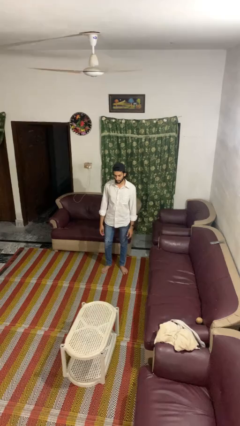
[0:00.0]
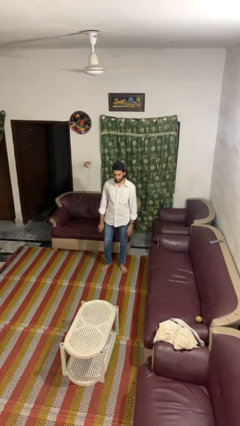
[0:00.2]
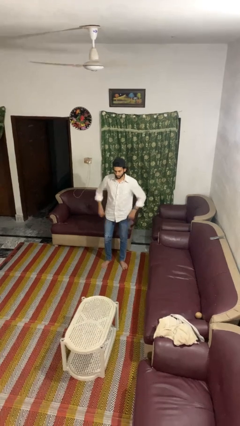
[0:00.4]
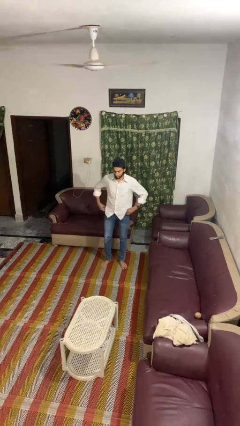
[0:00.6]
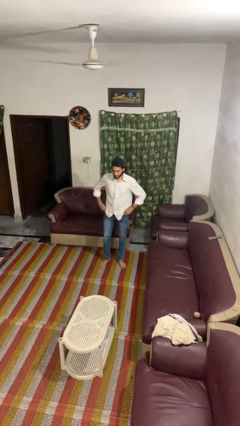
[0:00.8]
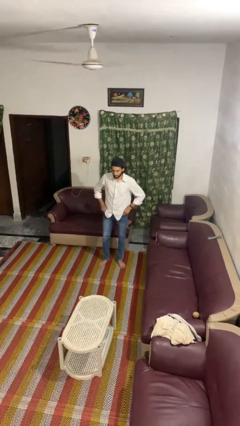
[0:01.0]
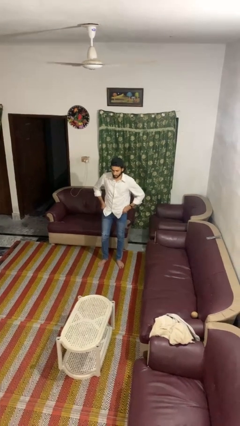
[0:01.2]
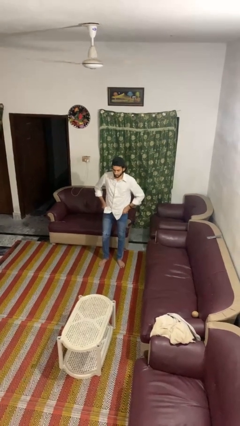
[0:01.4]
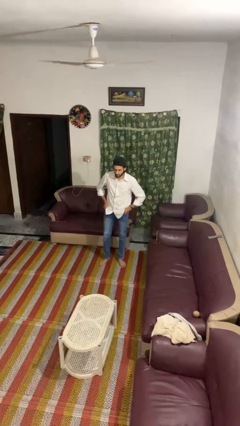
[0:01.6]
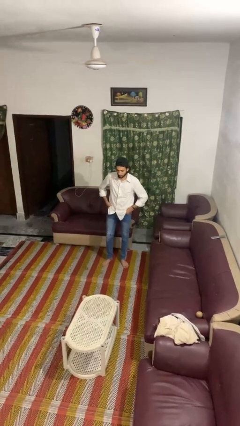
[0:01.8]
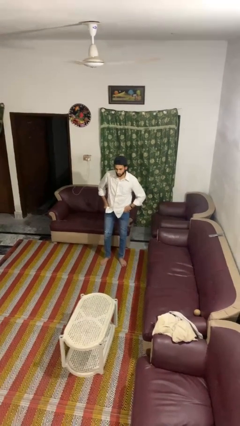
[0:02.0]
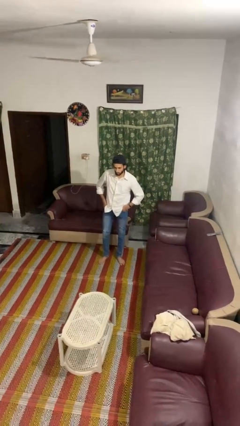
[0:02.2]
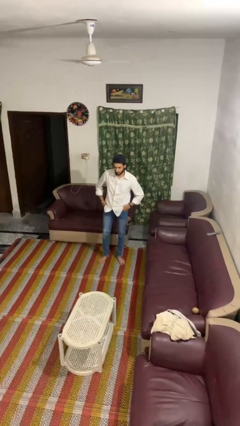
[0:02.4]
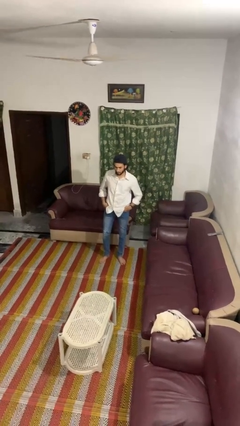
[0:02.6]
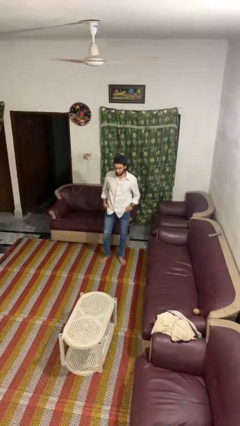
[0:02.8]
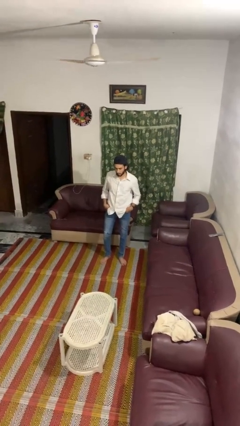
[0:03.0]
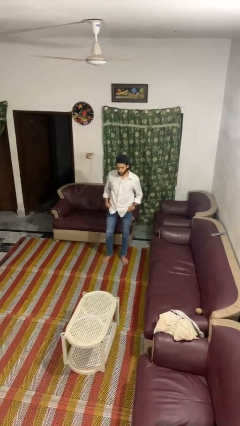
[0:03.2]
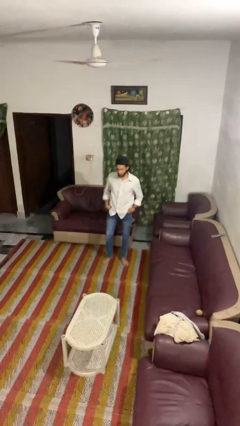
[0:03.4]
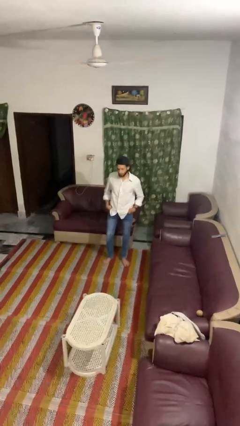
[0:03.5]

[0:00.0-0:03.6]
person puts hands in back pockets

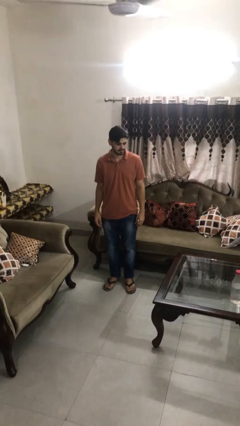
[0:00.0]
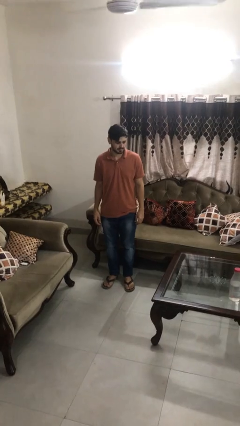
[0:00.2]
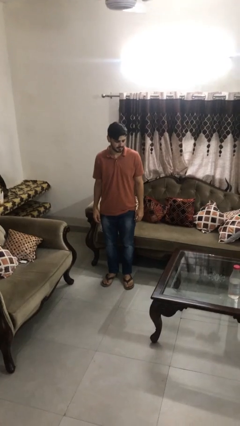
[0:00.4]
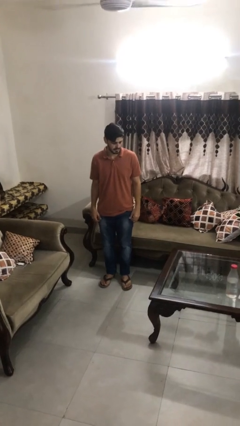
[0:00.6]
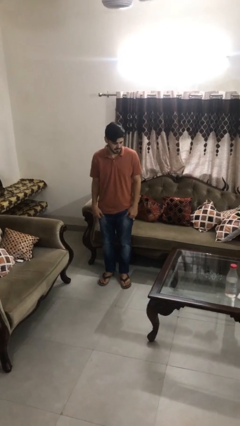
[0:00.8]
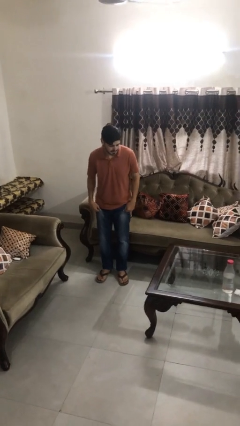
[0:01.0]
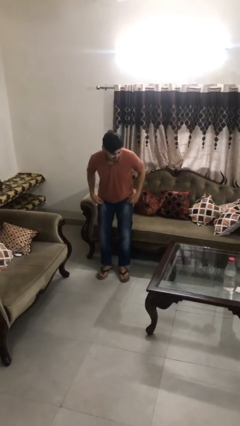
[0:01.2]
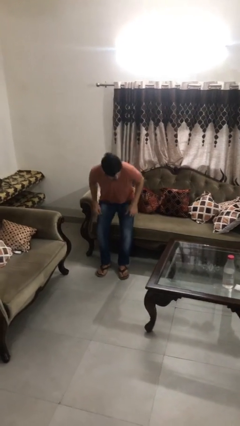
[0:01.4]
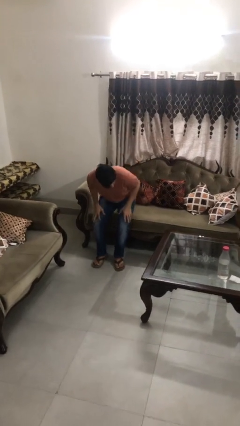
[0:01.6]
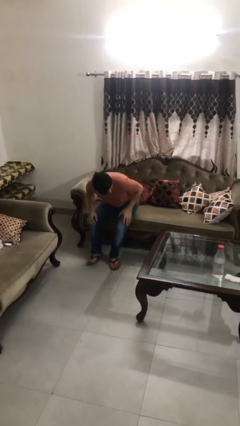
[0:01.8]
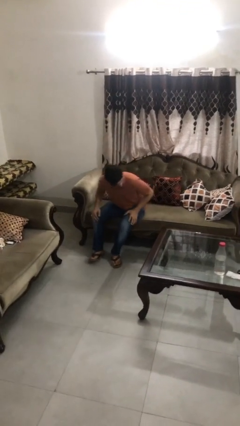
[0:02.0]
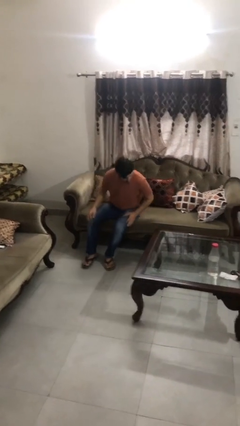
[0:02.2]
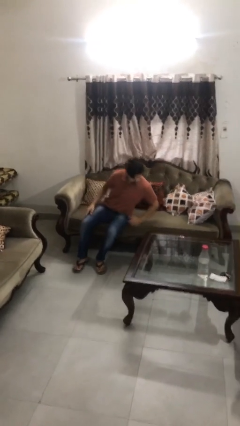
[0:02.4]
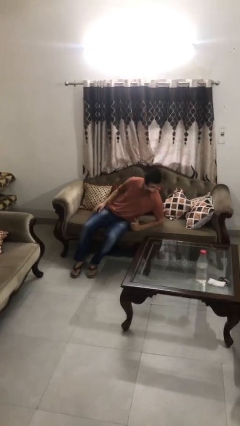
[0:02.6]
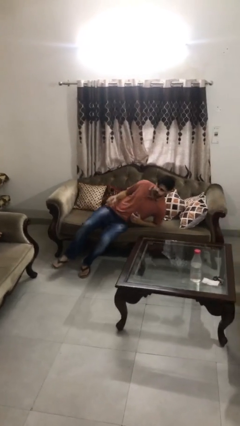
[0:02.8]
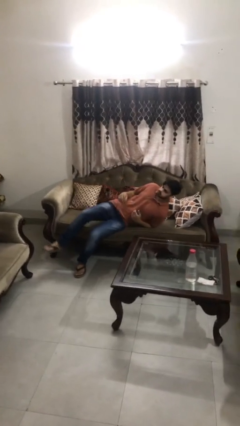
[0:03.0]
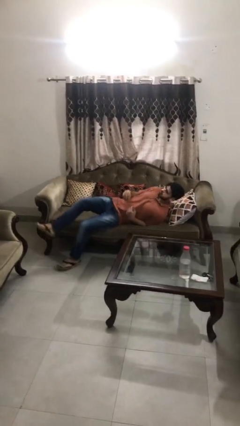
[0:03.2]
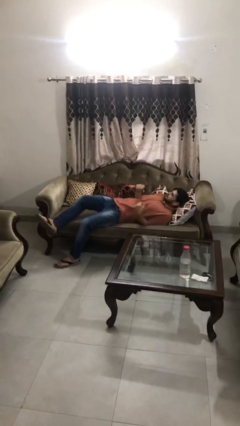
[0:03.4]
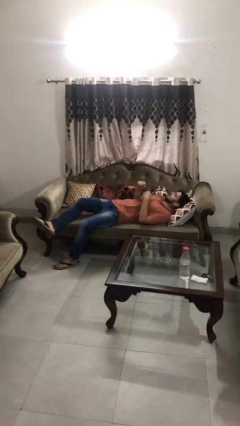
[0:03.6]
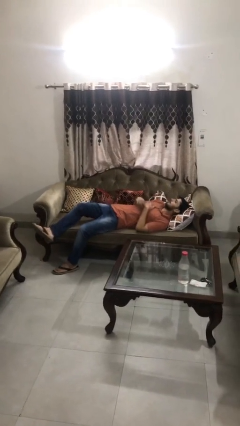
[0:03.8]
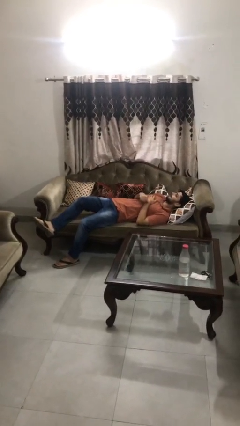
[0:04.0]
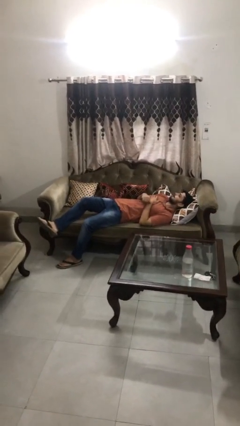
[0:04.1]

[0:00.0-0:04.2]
person lies down on couch

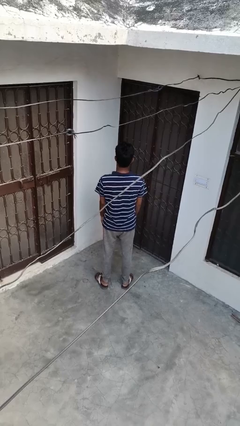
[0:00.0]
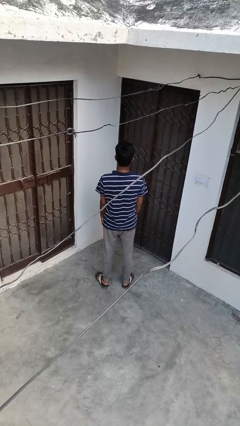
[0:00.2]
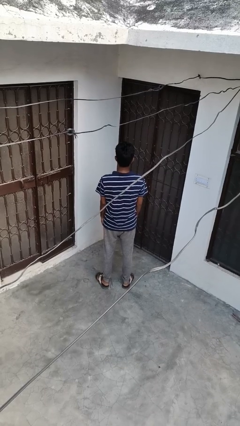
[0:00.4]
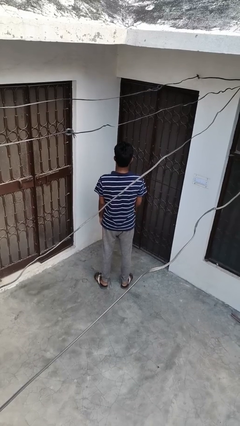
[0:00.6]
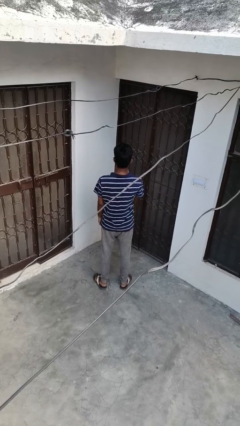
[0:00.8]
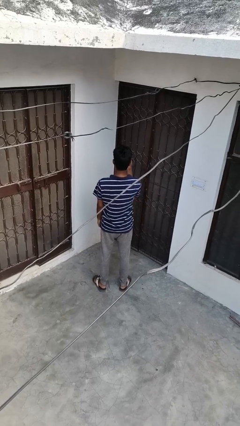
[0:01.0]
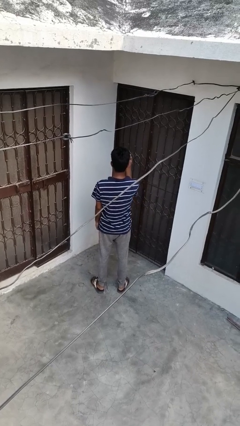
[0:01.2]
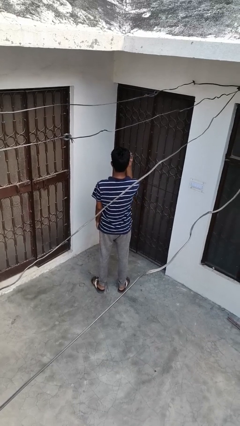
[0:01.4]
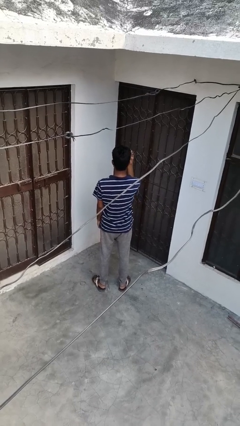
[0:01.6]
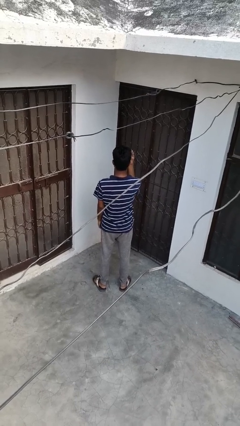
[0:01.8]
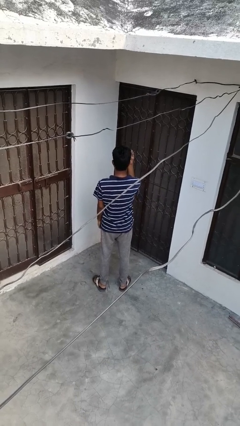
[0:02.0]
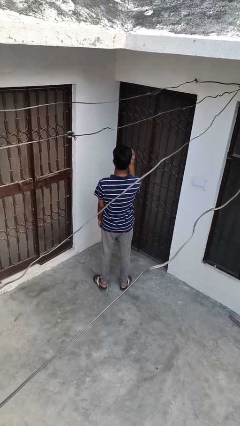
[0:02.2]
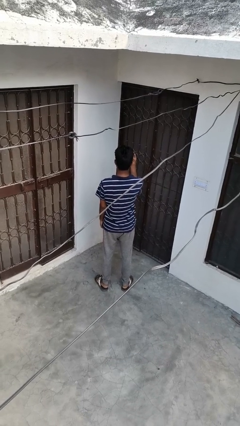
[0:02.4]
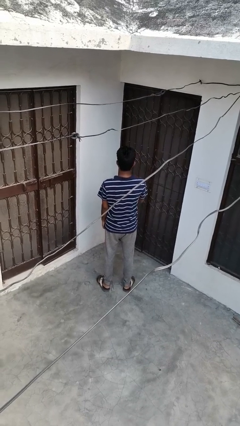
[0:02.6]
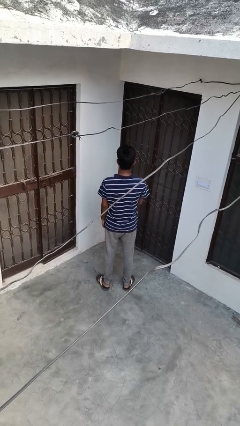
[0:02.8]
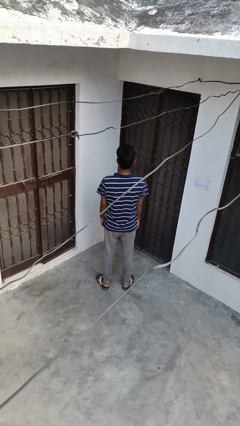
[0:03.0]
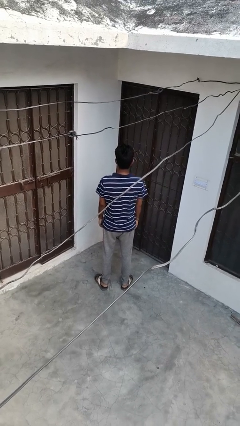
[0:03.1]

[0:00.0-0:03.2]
person gestures number four

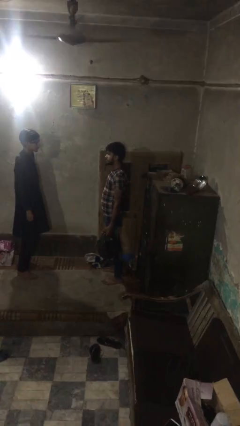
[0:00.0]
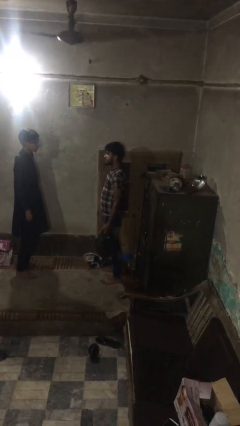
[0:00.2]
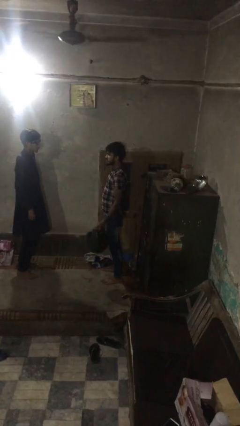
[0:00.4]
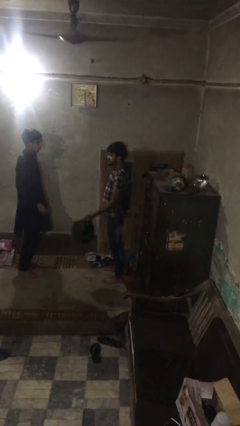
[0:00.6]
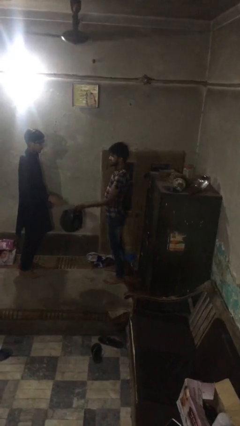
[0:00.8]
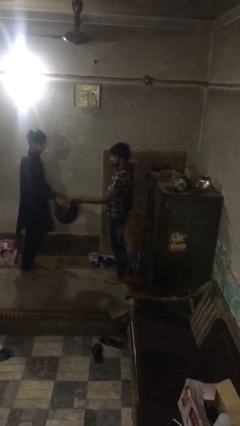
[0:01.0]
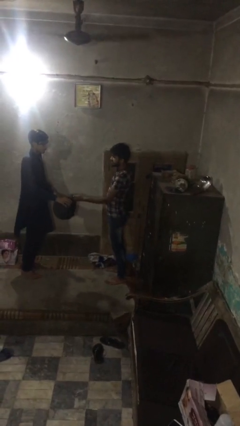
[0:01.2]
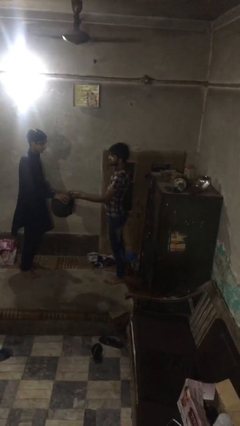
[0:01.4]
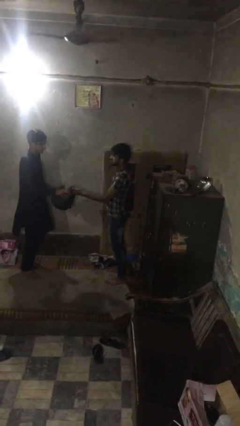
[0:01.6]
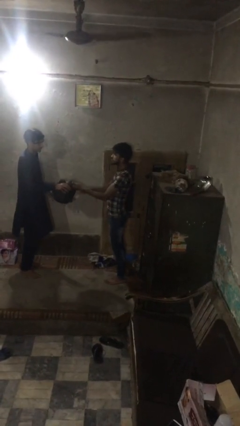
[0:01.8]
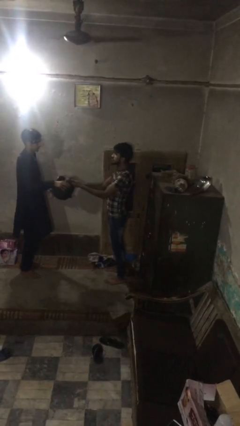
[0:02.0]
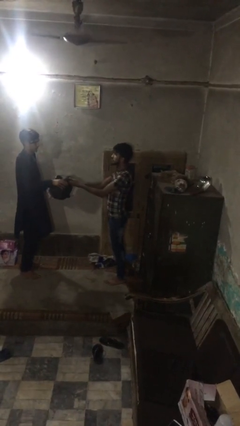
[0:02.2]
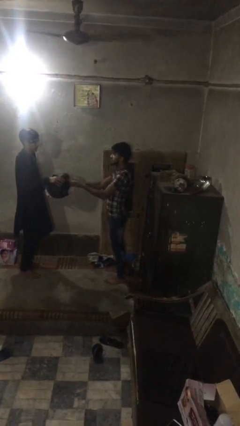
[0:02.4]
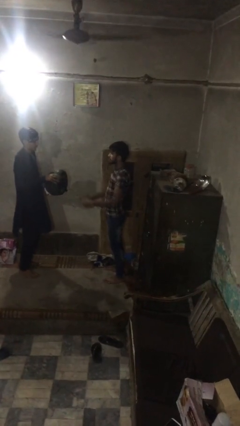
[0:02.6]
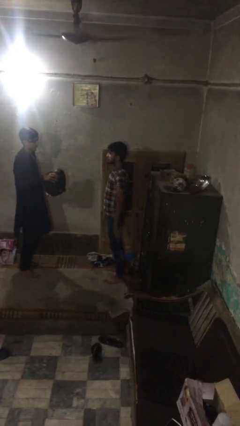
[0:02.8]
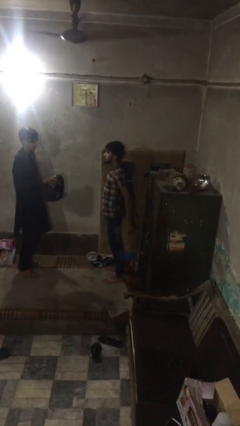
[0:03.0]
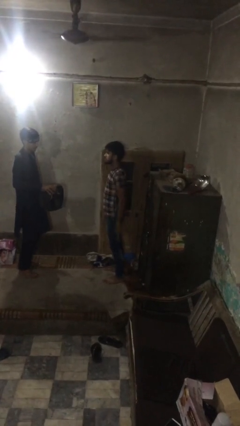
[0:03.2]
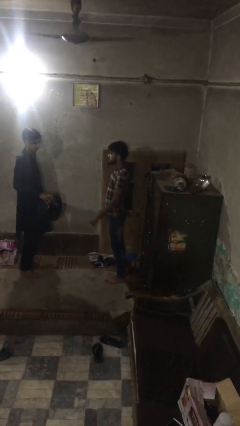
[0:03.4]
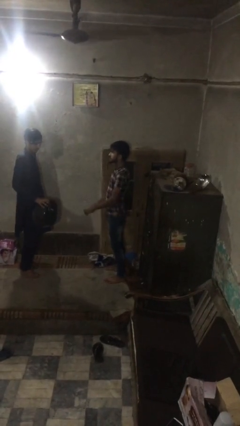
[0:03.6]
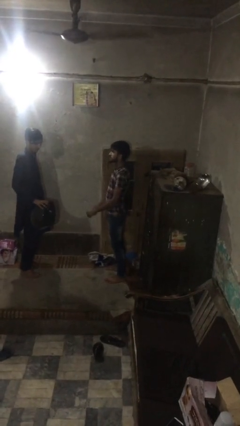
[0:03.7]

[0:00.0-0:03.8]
person transfers object to person

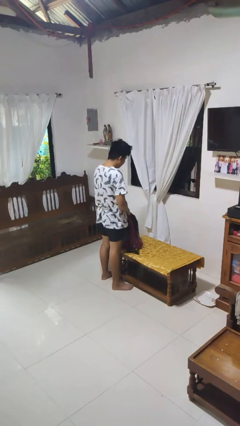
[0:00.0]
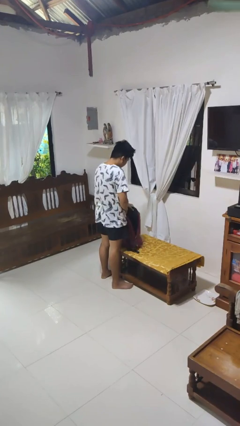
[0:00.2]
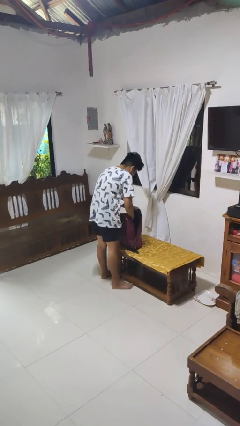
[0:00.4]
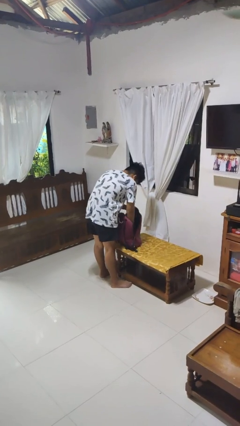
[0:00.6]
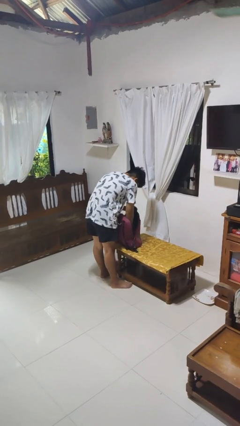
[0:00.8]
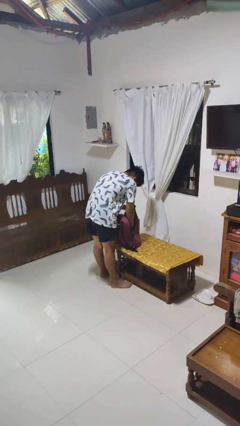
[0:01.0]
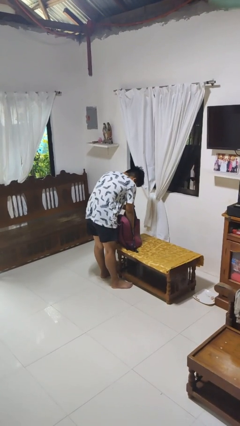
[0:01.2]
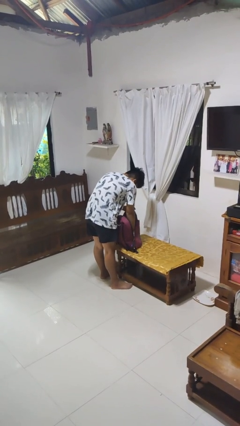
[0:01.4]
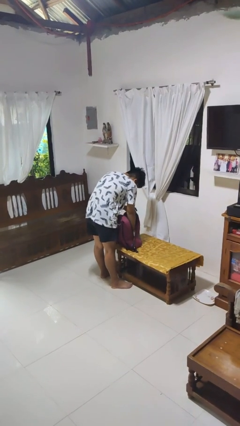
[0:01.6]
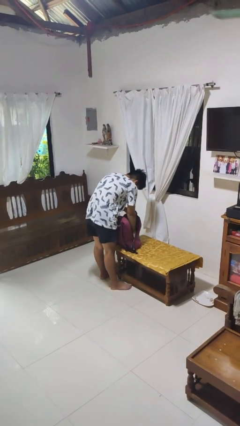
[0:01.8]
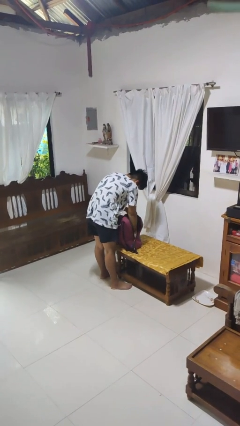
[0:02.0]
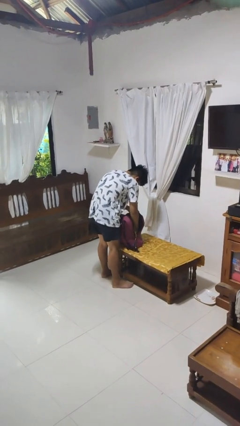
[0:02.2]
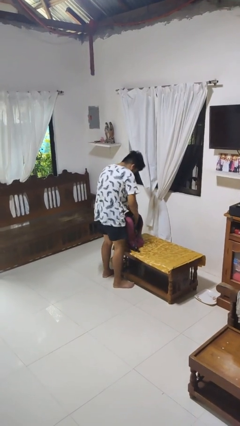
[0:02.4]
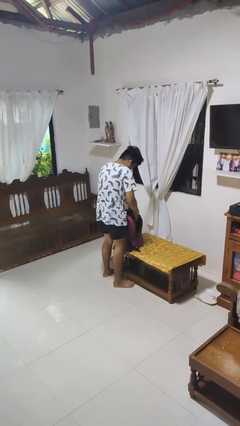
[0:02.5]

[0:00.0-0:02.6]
person searches in bag
